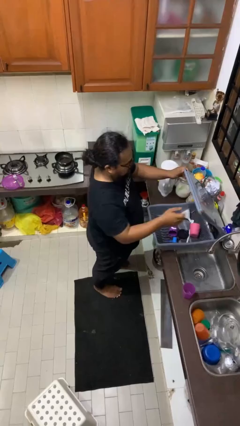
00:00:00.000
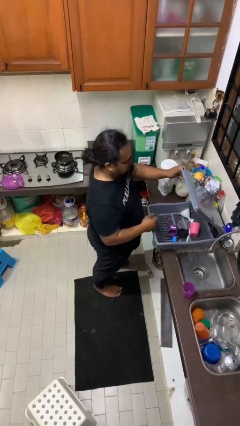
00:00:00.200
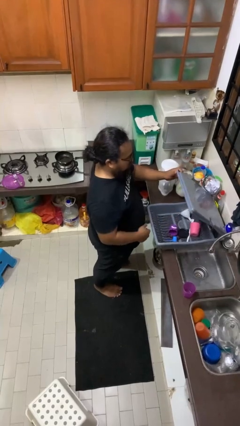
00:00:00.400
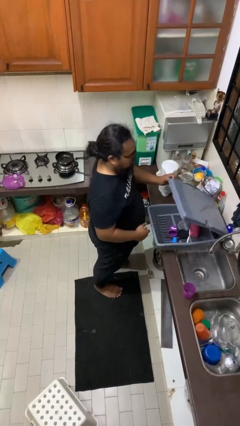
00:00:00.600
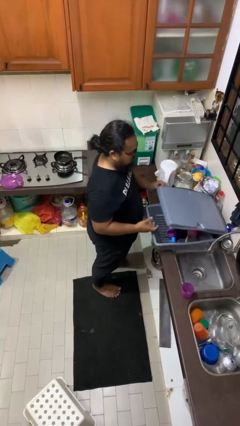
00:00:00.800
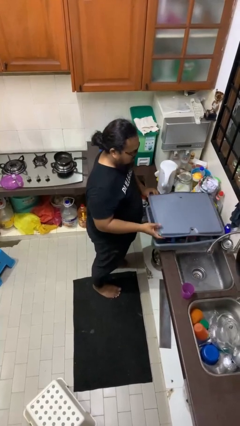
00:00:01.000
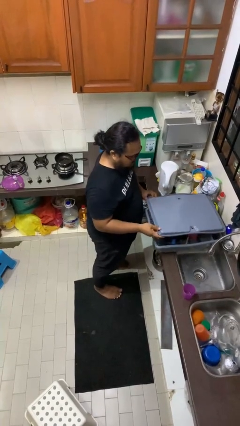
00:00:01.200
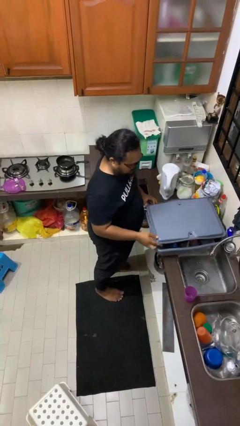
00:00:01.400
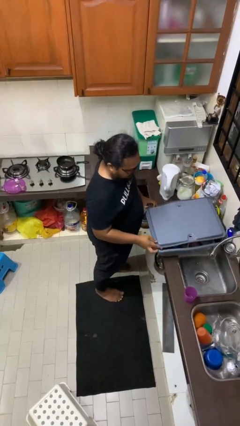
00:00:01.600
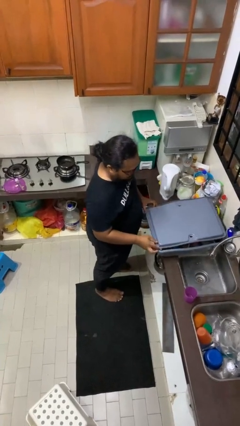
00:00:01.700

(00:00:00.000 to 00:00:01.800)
person closes dishwasher

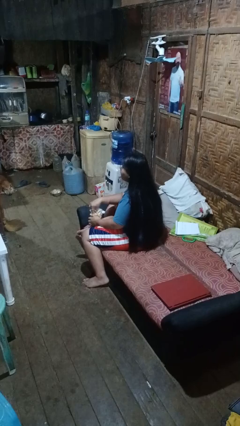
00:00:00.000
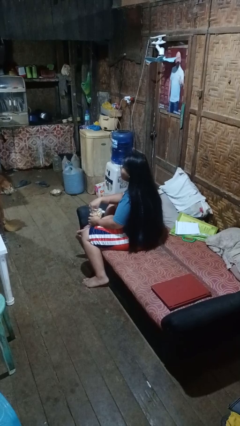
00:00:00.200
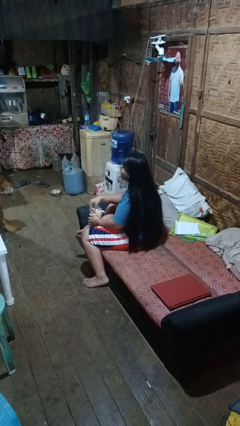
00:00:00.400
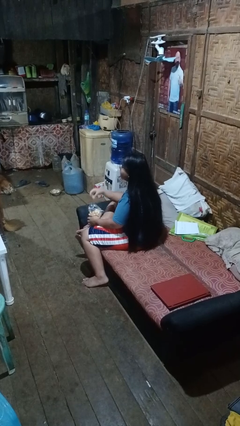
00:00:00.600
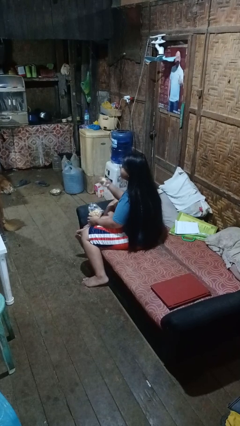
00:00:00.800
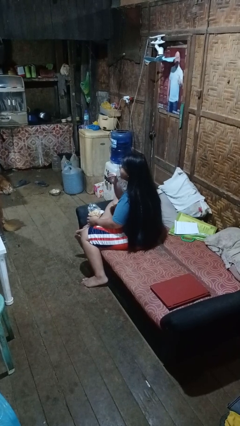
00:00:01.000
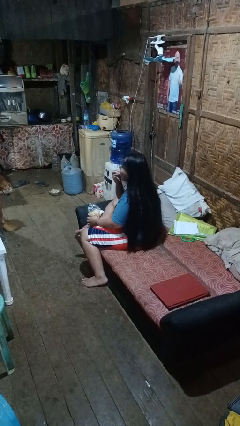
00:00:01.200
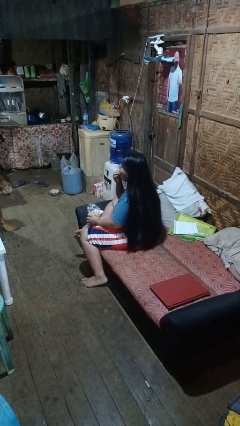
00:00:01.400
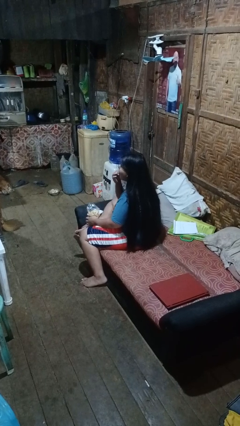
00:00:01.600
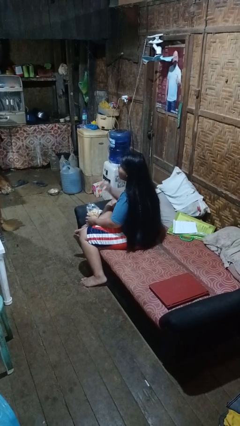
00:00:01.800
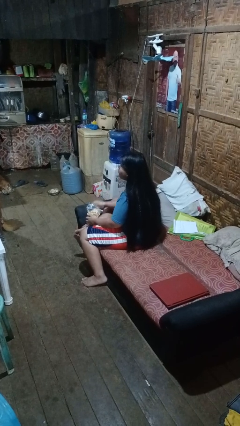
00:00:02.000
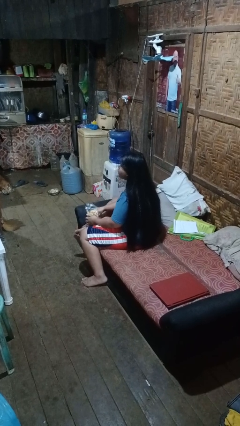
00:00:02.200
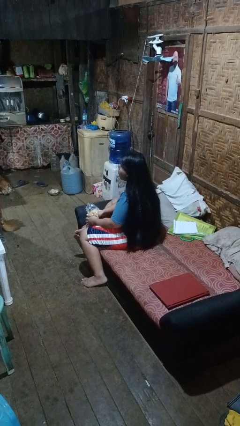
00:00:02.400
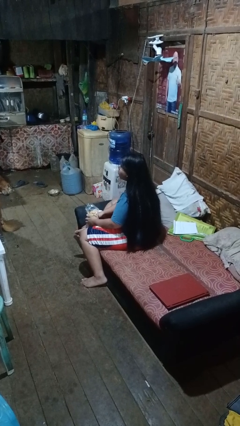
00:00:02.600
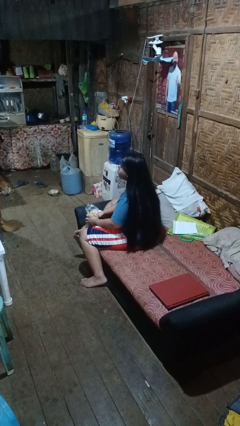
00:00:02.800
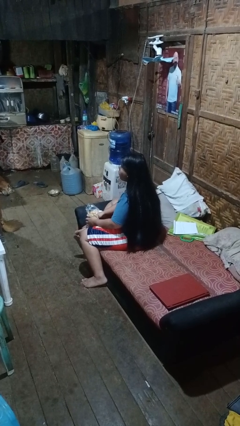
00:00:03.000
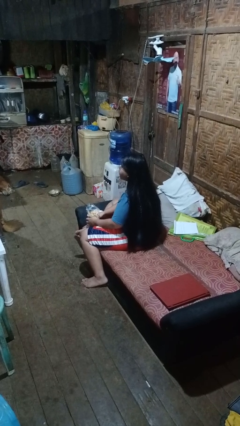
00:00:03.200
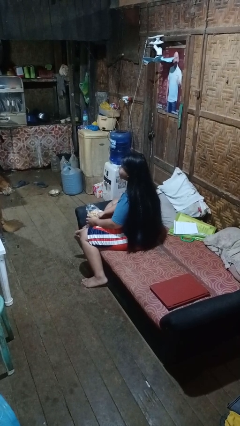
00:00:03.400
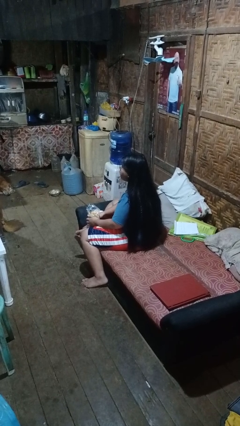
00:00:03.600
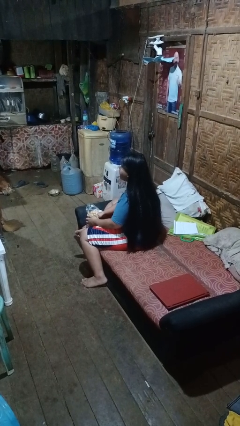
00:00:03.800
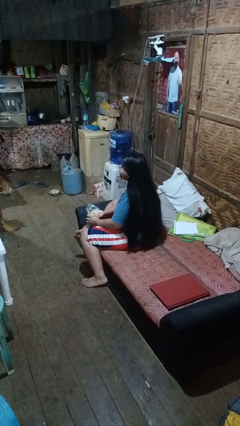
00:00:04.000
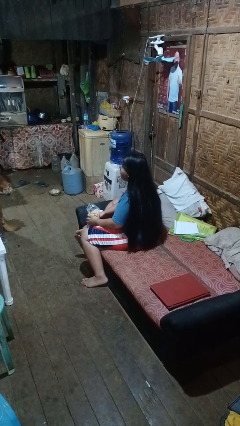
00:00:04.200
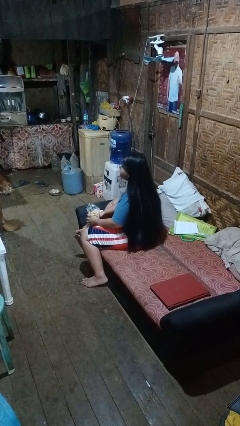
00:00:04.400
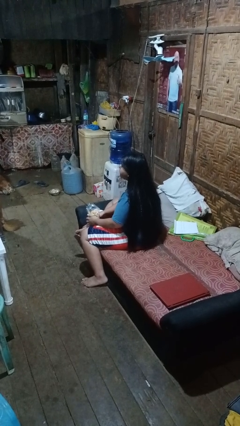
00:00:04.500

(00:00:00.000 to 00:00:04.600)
person eats snack from bag

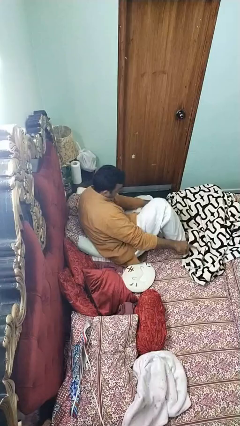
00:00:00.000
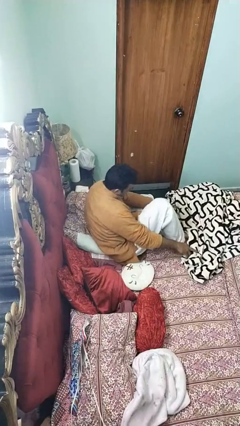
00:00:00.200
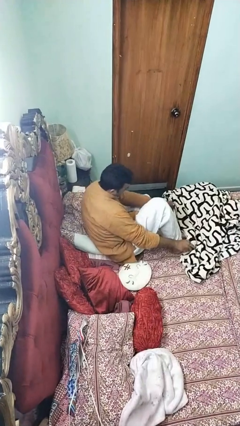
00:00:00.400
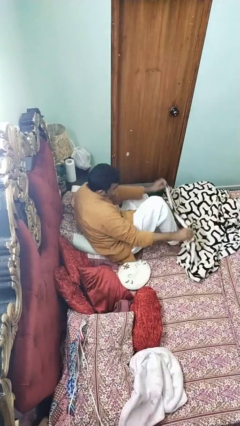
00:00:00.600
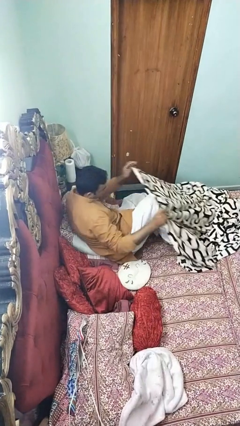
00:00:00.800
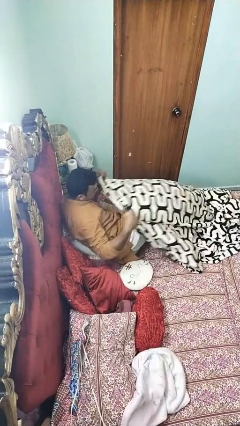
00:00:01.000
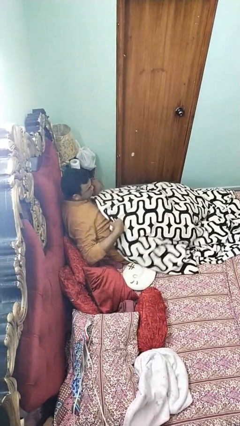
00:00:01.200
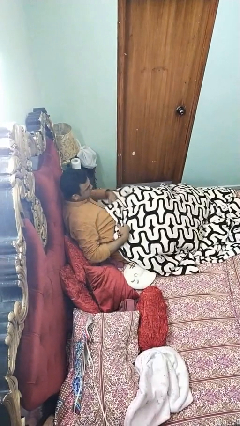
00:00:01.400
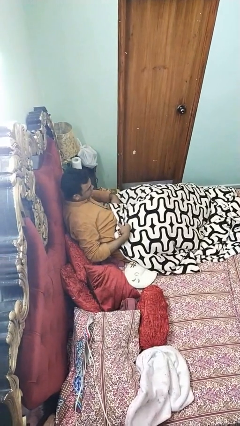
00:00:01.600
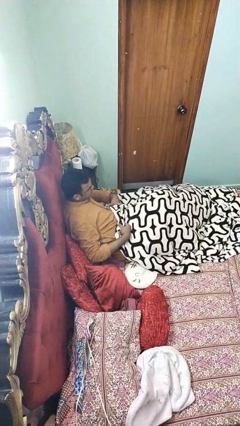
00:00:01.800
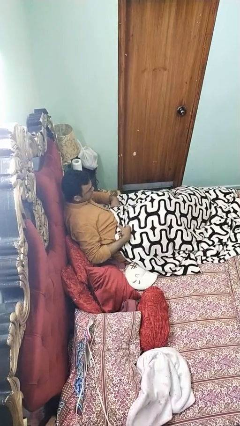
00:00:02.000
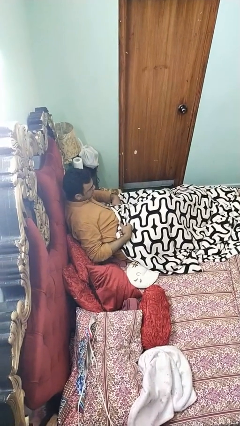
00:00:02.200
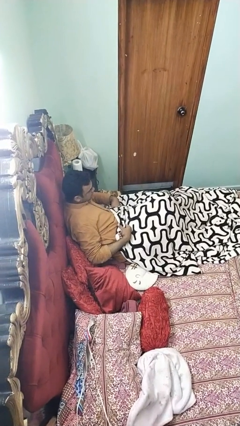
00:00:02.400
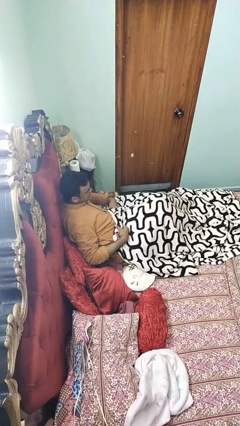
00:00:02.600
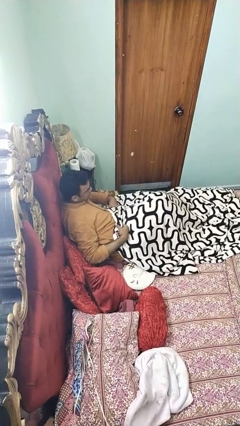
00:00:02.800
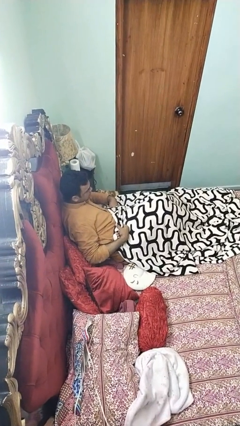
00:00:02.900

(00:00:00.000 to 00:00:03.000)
person covers with blanket

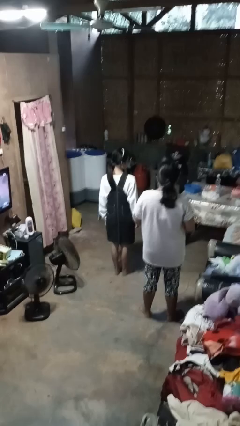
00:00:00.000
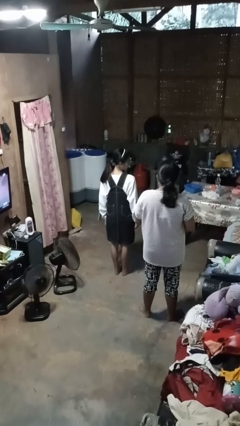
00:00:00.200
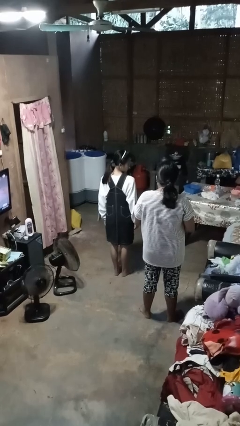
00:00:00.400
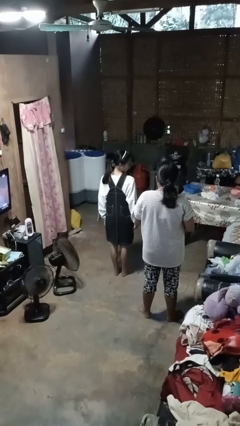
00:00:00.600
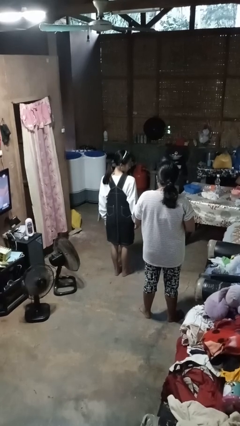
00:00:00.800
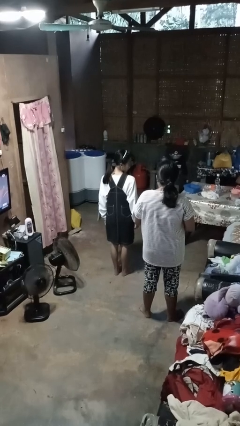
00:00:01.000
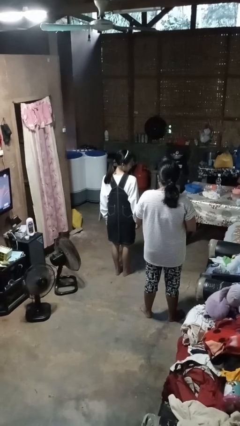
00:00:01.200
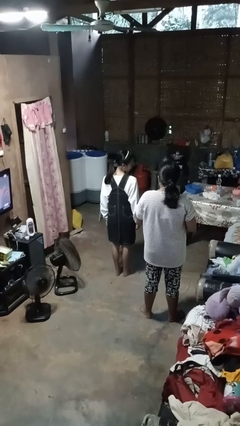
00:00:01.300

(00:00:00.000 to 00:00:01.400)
person looks over shoulder

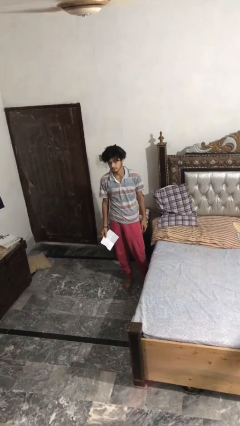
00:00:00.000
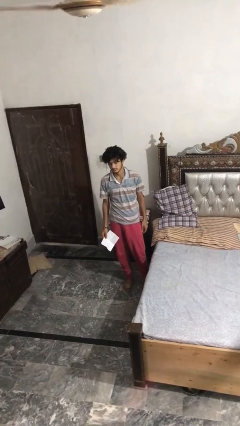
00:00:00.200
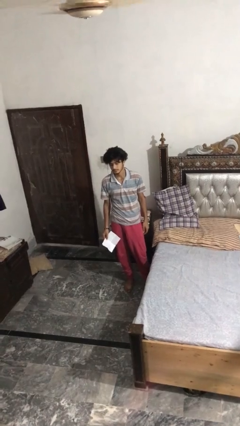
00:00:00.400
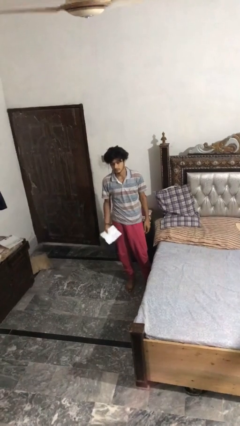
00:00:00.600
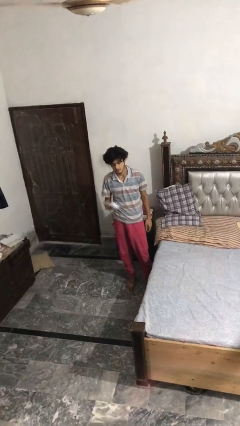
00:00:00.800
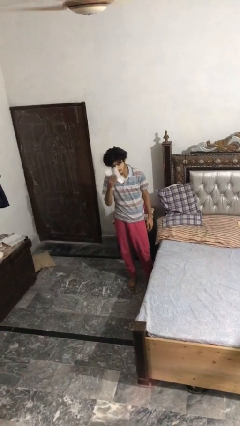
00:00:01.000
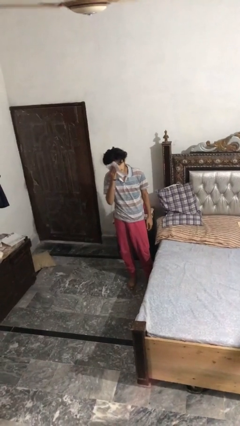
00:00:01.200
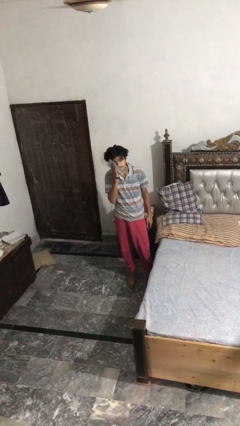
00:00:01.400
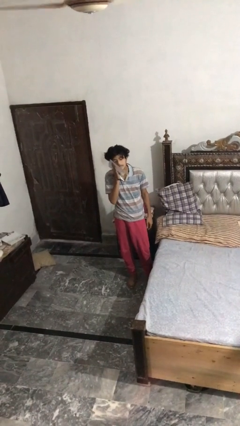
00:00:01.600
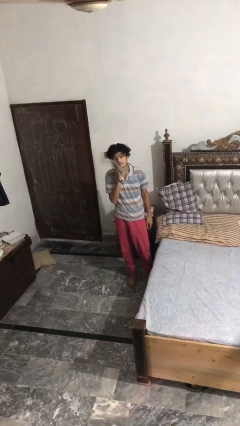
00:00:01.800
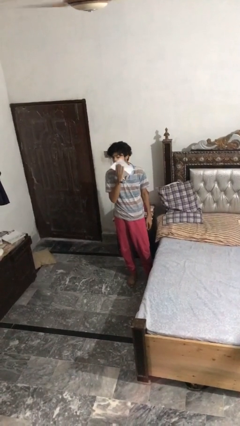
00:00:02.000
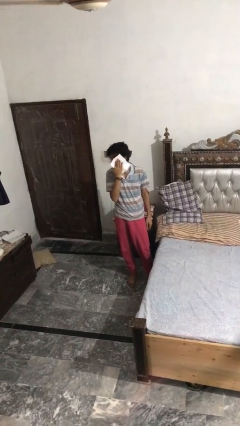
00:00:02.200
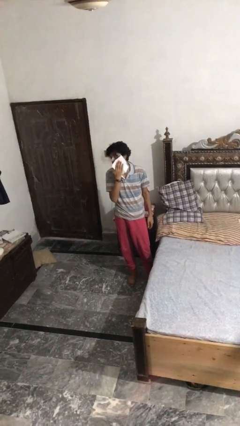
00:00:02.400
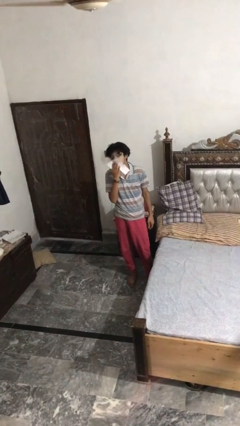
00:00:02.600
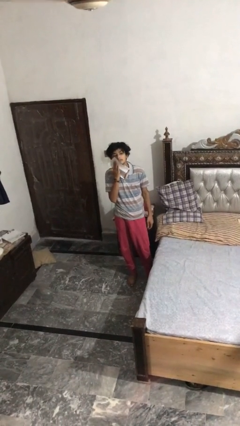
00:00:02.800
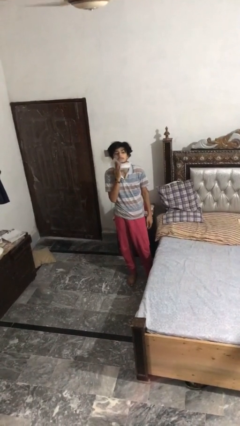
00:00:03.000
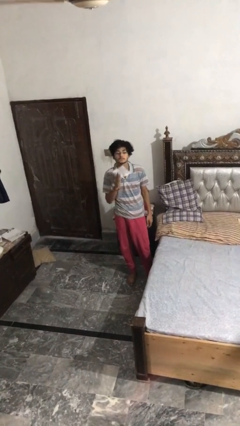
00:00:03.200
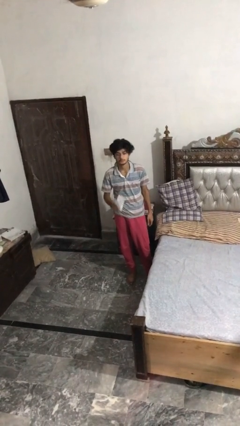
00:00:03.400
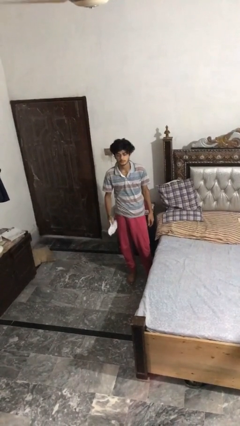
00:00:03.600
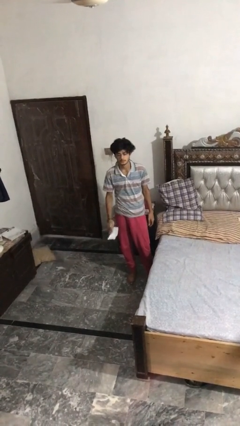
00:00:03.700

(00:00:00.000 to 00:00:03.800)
person wipes mouth with napkin

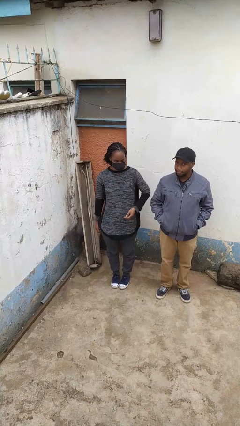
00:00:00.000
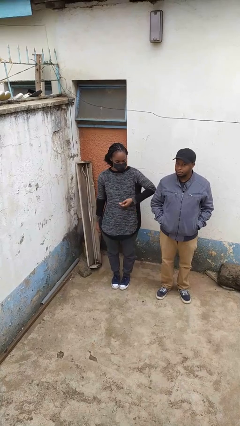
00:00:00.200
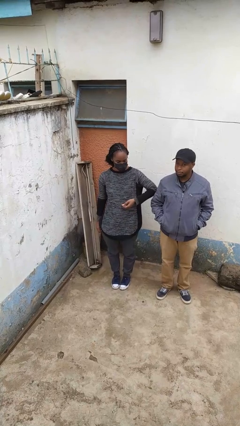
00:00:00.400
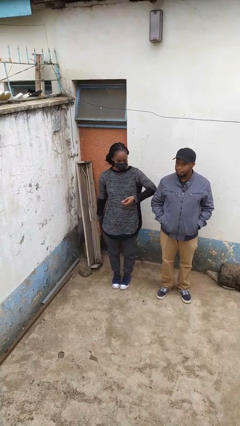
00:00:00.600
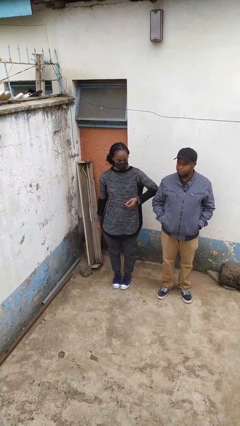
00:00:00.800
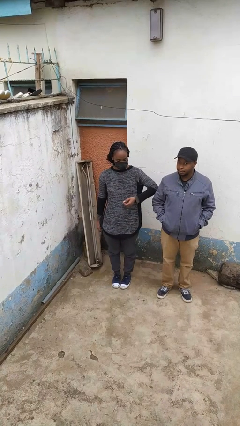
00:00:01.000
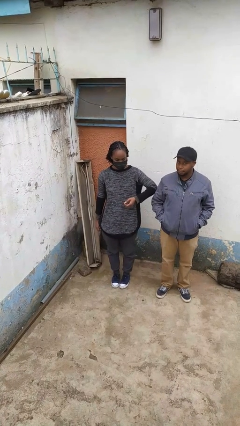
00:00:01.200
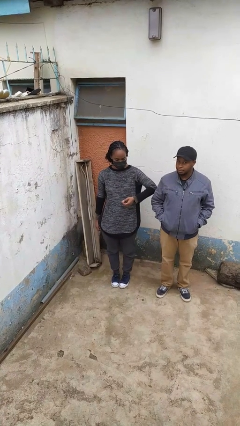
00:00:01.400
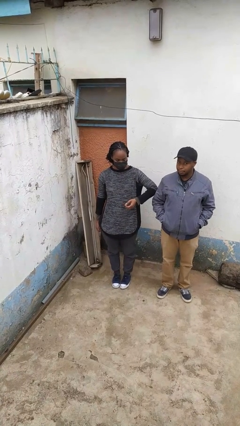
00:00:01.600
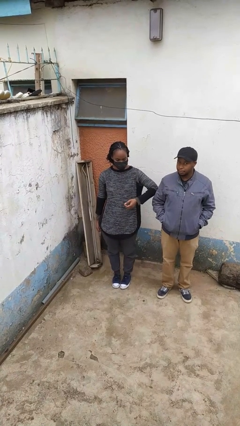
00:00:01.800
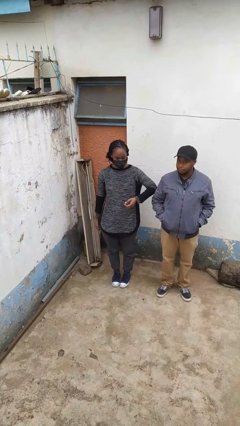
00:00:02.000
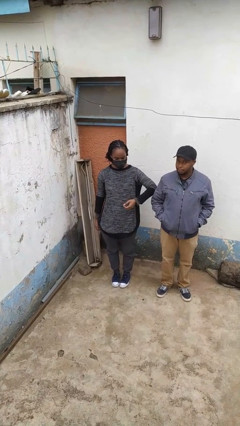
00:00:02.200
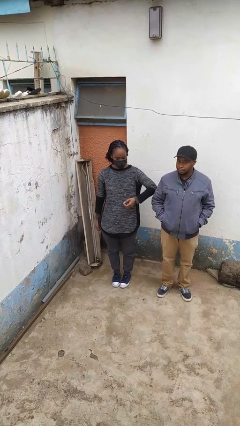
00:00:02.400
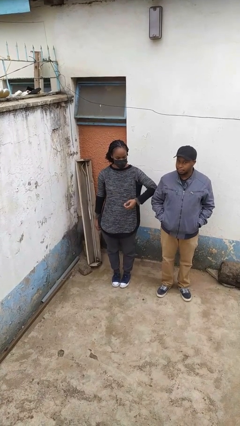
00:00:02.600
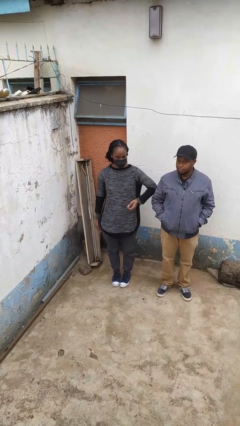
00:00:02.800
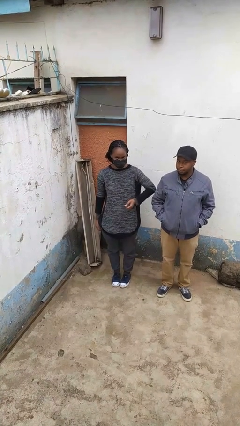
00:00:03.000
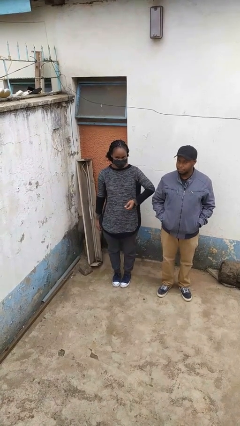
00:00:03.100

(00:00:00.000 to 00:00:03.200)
person nudges person with elbow
